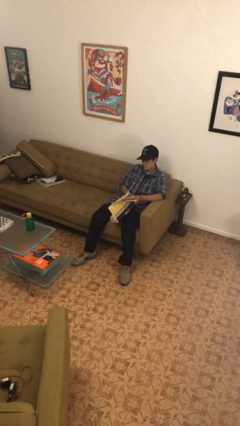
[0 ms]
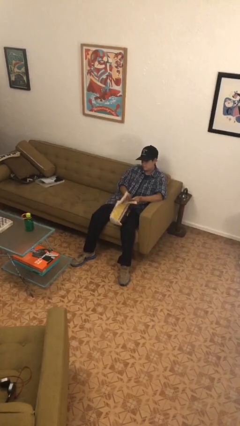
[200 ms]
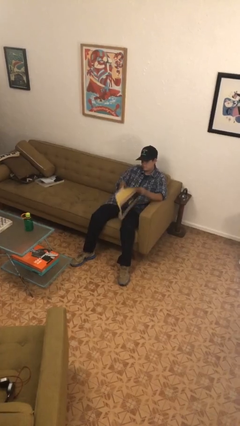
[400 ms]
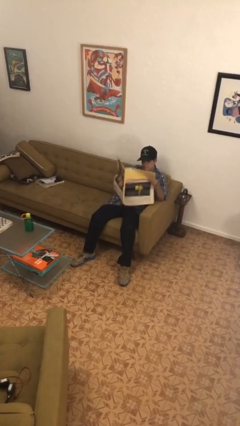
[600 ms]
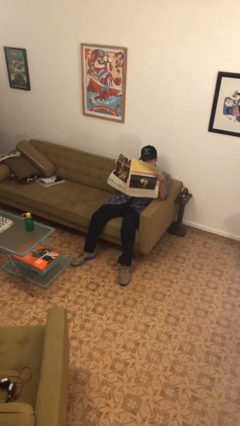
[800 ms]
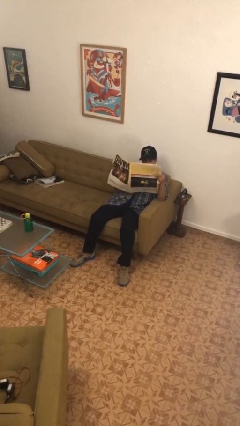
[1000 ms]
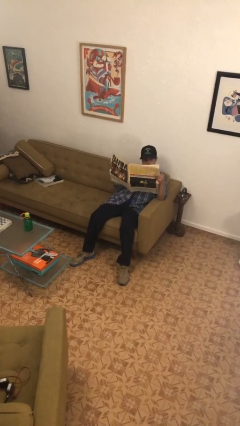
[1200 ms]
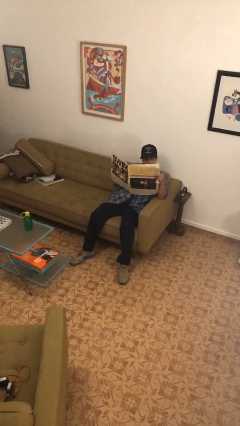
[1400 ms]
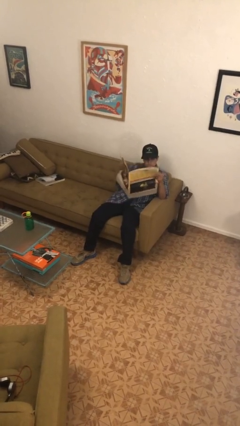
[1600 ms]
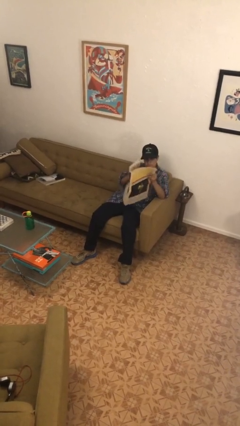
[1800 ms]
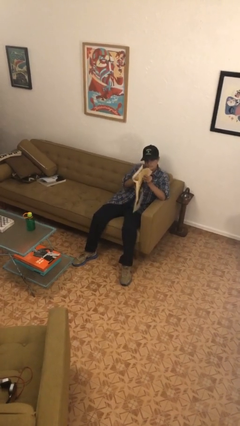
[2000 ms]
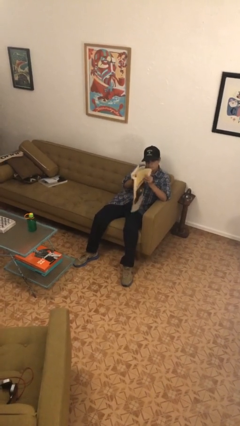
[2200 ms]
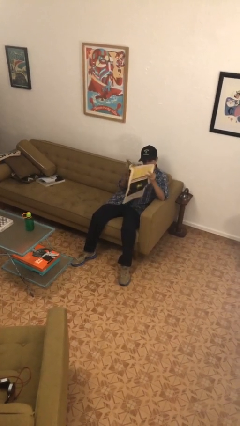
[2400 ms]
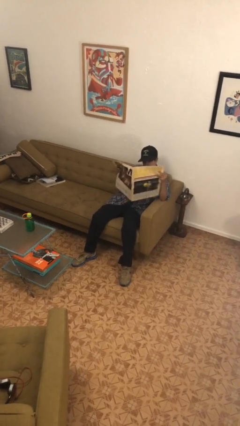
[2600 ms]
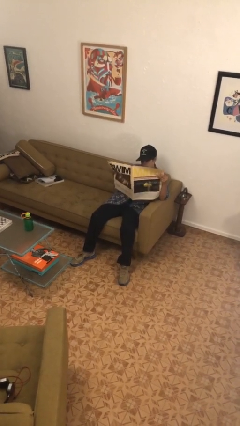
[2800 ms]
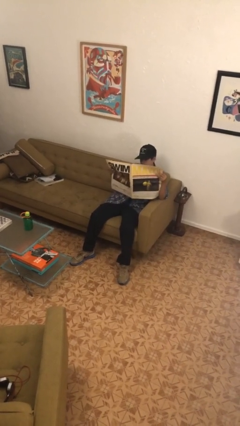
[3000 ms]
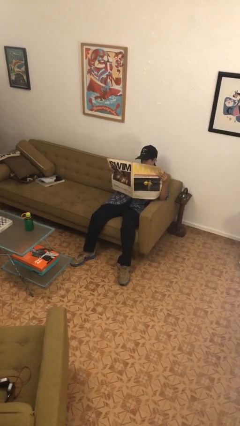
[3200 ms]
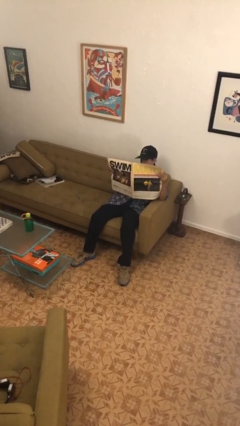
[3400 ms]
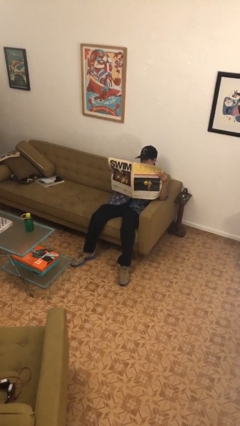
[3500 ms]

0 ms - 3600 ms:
person reads newspaper

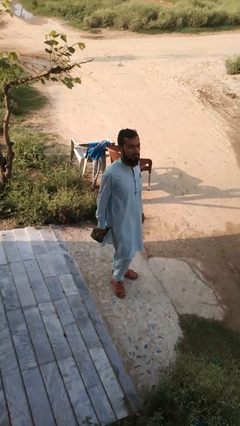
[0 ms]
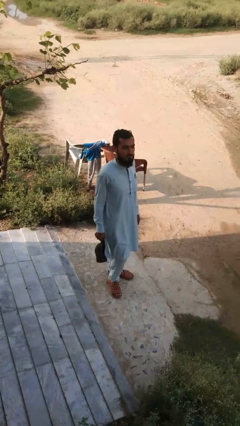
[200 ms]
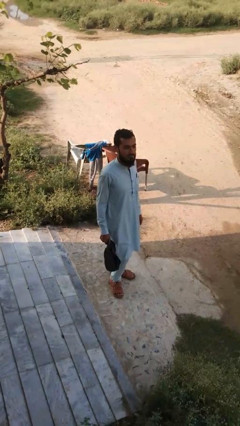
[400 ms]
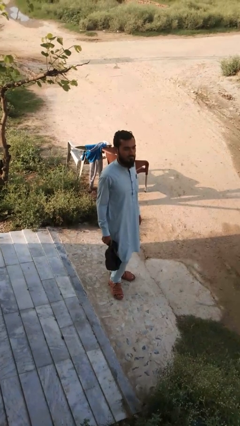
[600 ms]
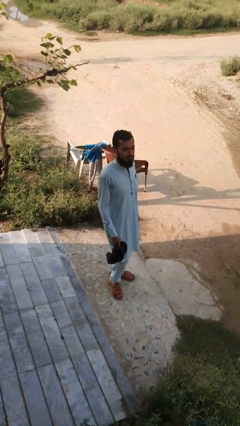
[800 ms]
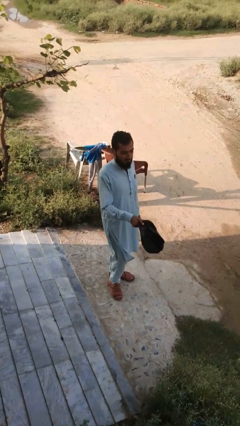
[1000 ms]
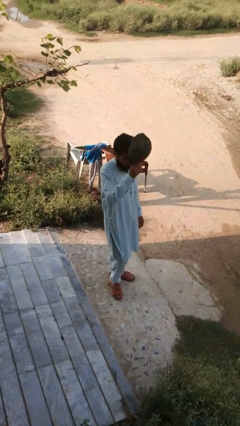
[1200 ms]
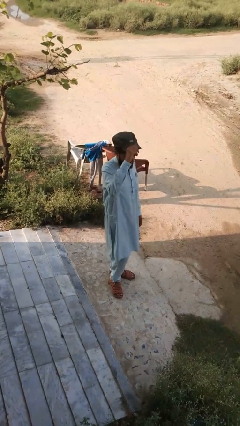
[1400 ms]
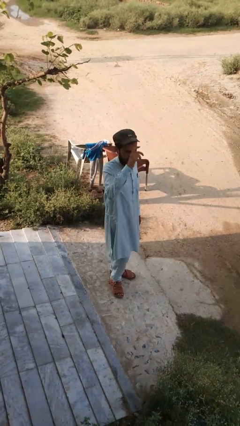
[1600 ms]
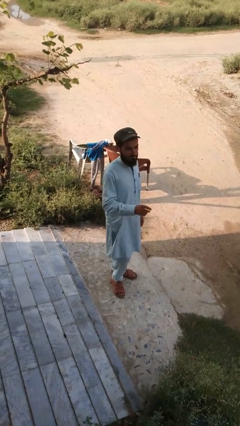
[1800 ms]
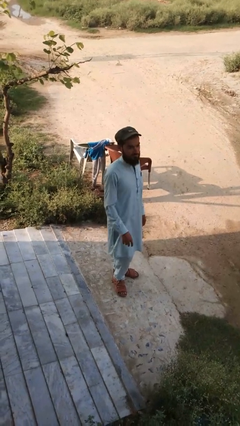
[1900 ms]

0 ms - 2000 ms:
person puts on hat

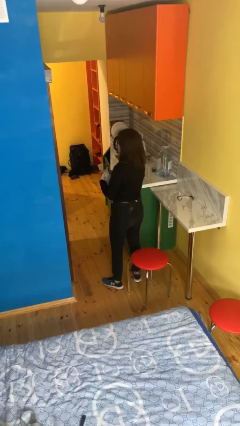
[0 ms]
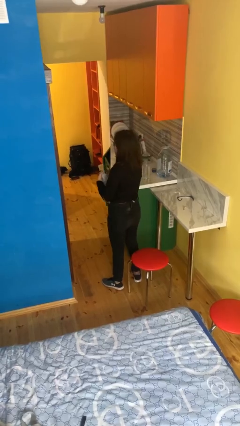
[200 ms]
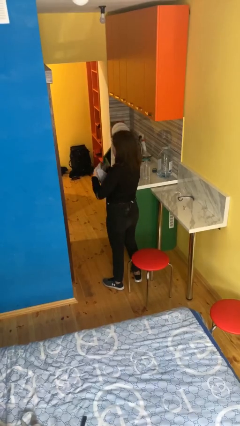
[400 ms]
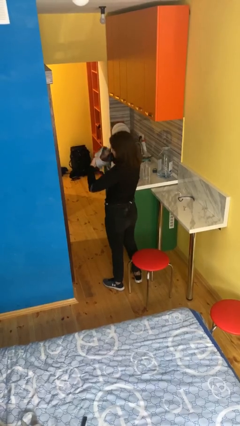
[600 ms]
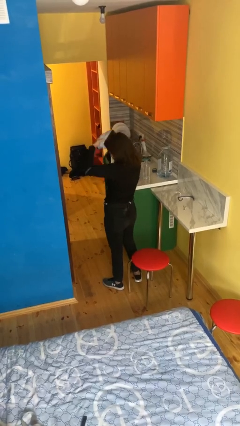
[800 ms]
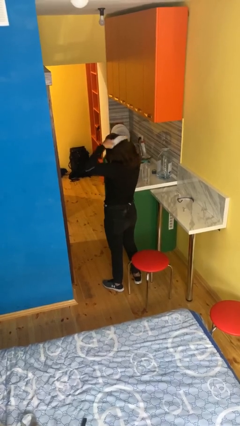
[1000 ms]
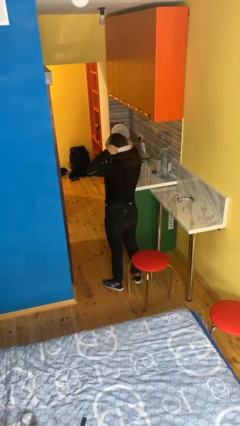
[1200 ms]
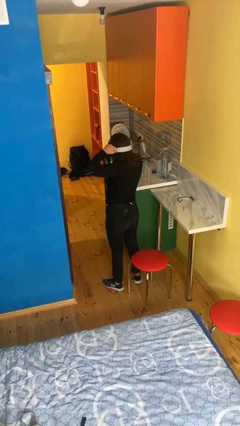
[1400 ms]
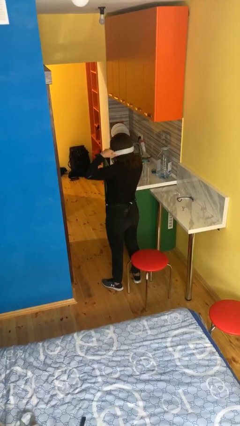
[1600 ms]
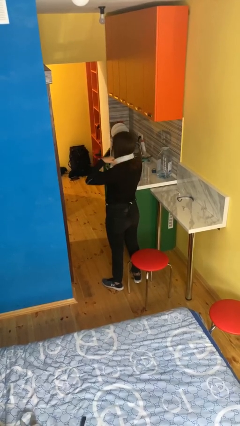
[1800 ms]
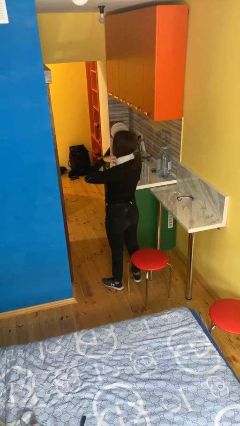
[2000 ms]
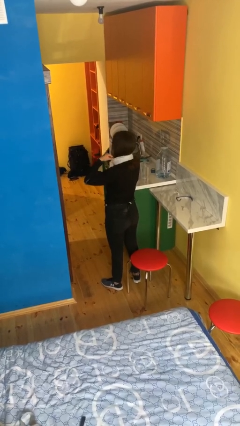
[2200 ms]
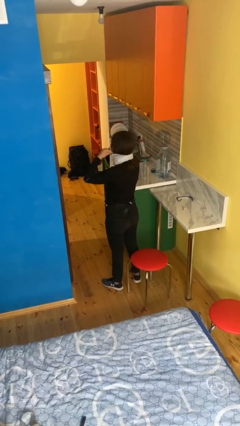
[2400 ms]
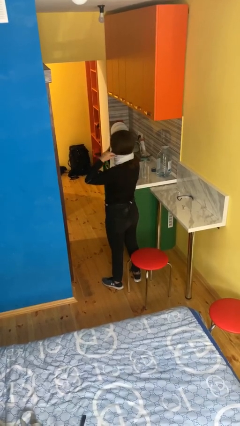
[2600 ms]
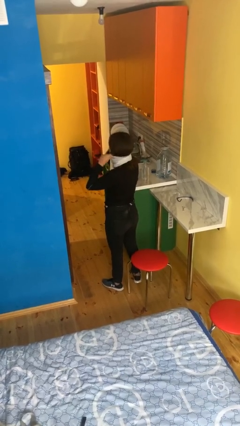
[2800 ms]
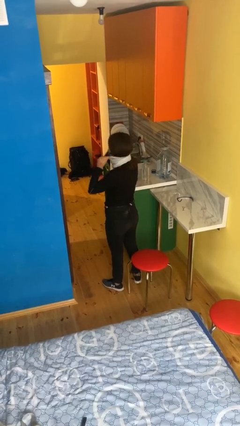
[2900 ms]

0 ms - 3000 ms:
person puts on scarf

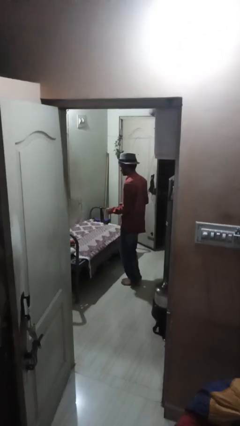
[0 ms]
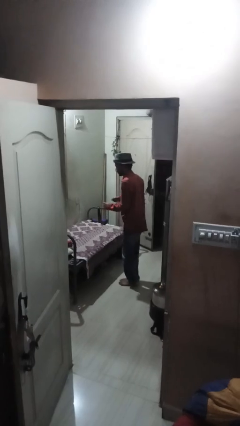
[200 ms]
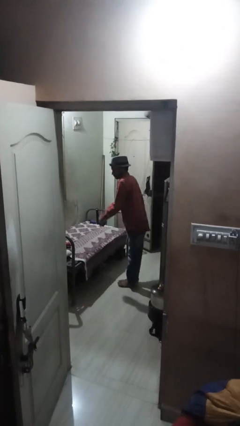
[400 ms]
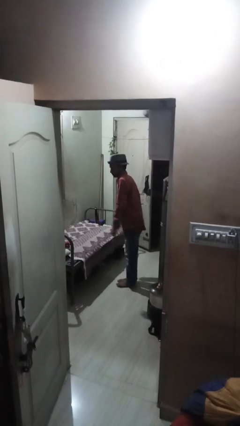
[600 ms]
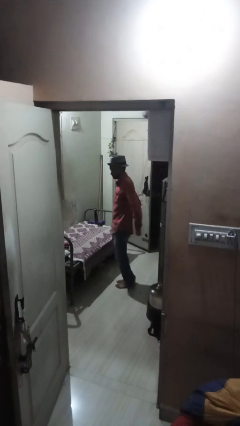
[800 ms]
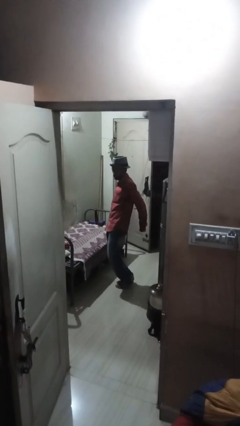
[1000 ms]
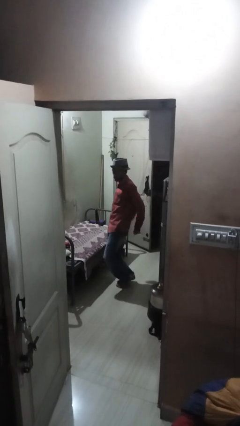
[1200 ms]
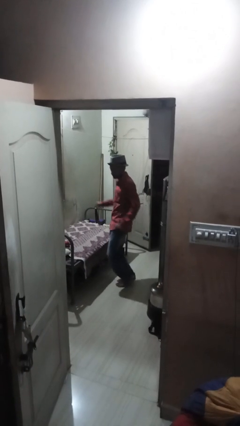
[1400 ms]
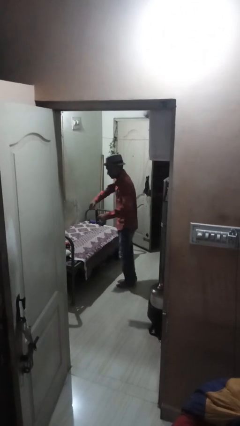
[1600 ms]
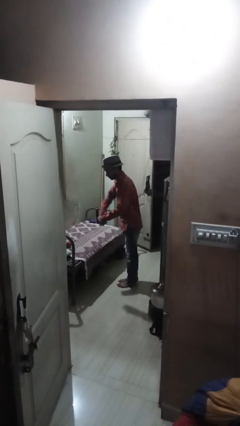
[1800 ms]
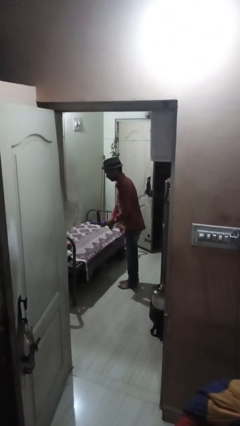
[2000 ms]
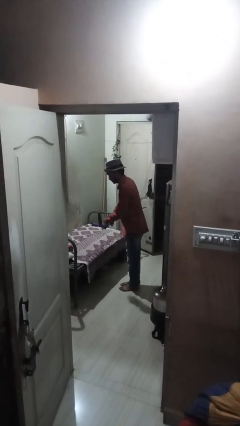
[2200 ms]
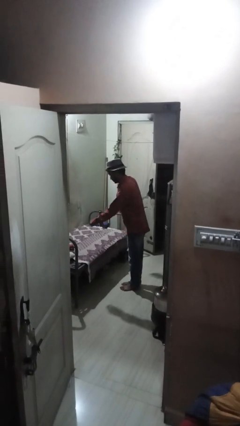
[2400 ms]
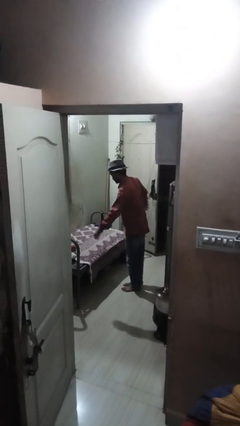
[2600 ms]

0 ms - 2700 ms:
person dances in place

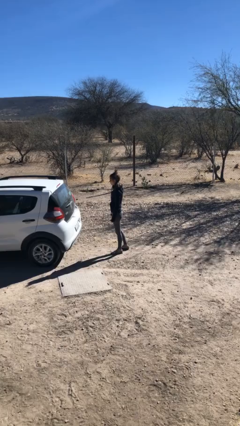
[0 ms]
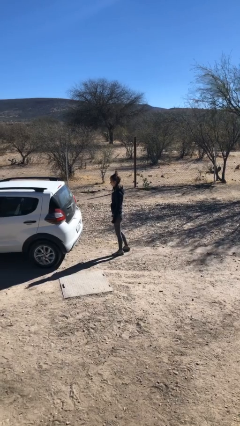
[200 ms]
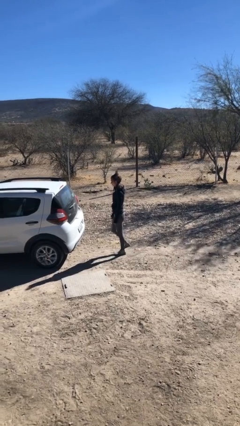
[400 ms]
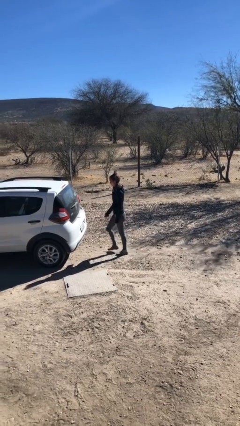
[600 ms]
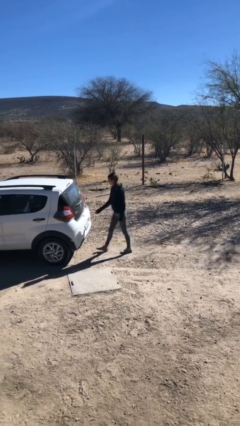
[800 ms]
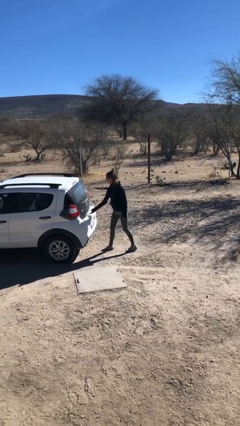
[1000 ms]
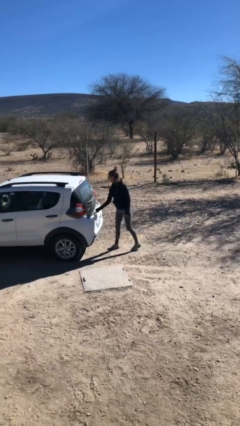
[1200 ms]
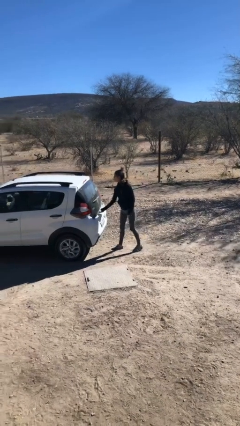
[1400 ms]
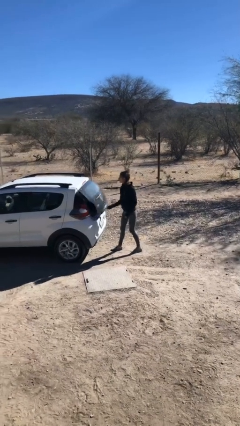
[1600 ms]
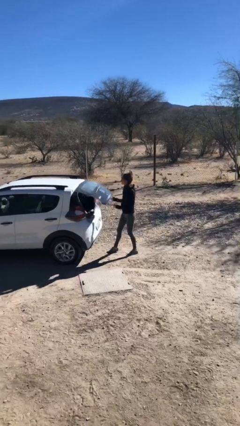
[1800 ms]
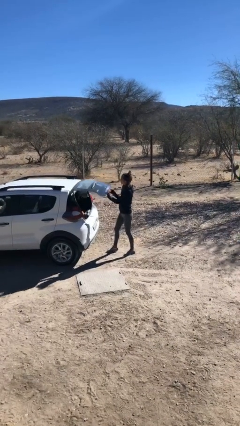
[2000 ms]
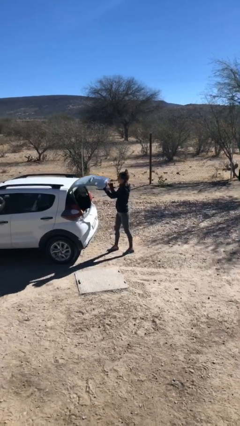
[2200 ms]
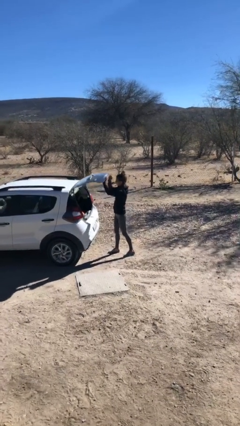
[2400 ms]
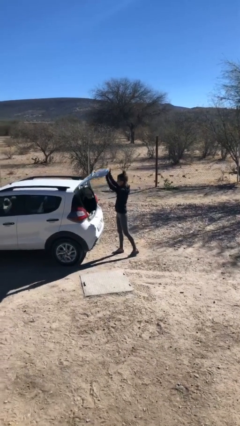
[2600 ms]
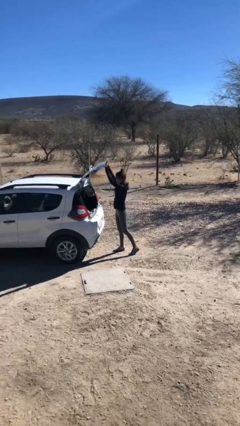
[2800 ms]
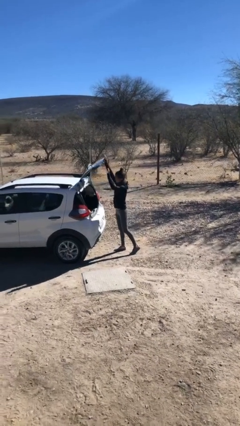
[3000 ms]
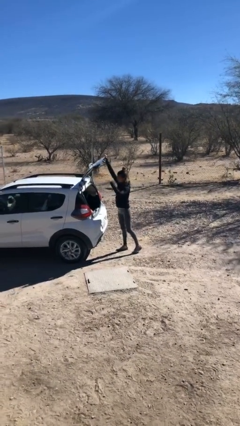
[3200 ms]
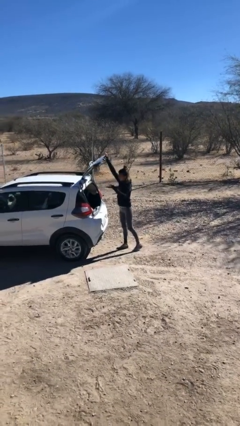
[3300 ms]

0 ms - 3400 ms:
person opens car trunk

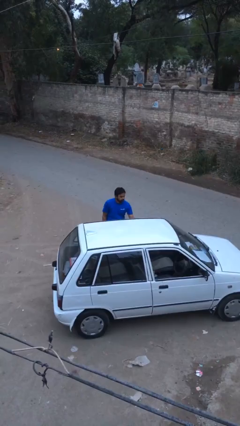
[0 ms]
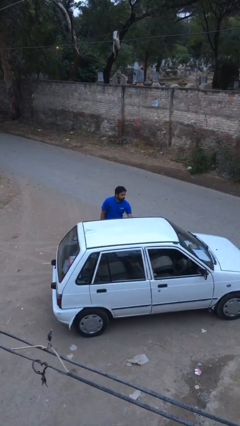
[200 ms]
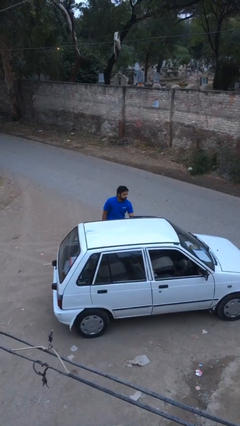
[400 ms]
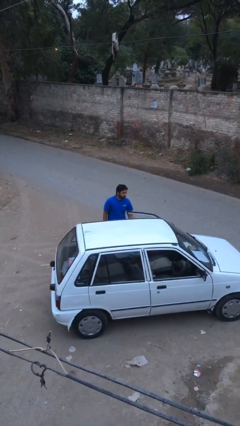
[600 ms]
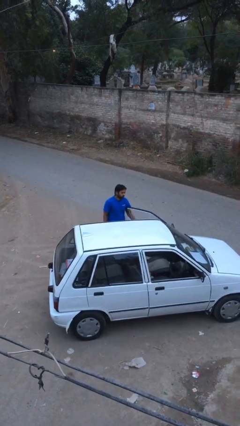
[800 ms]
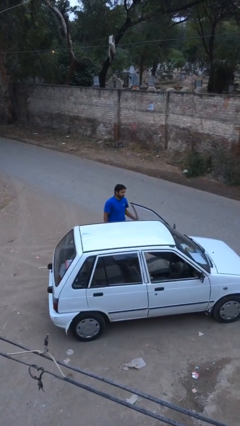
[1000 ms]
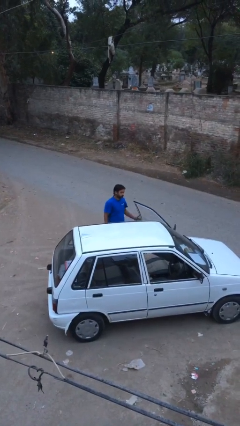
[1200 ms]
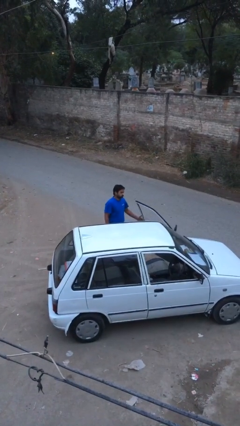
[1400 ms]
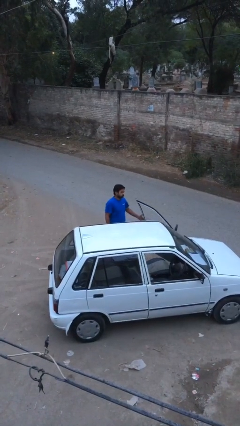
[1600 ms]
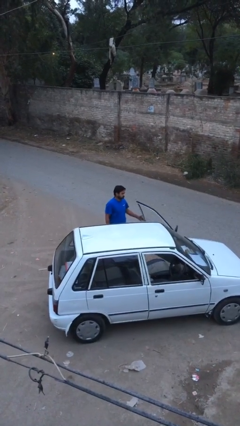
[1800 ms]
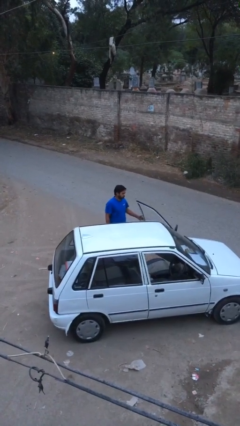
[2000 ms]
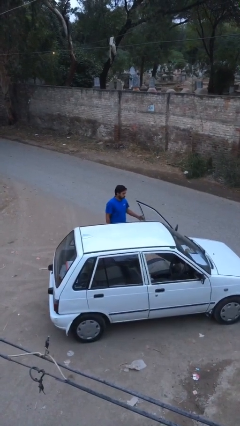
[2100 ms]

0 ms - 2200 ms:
person opens car door

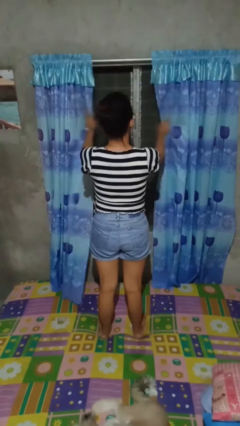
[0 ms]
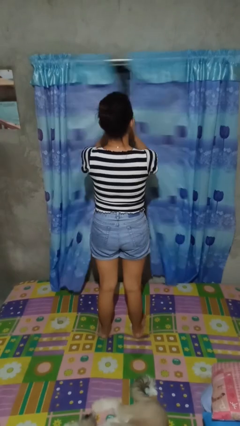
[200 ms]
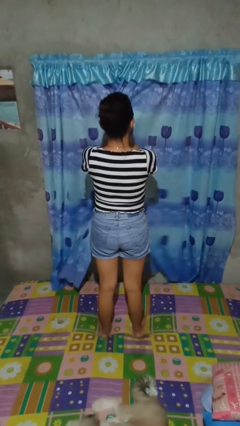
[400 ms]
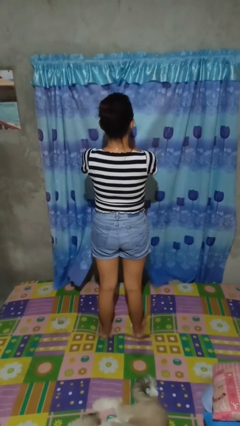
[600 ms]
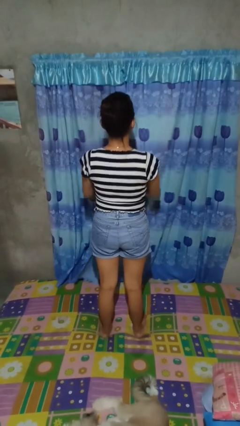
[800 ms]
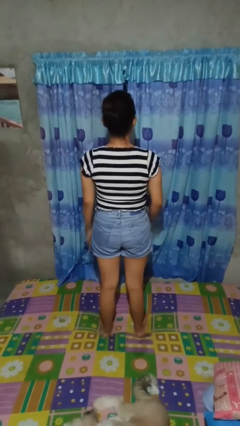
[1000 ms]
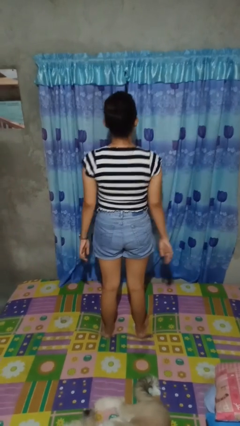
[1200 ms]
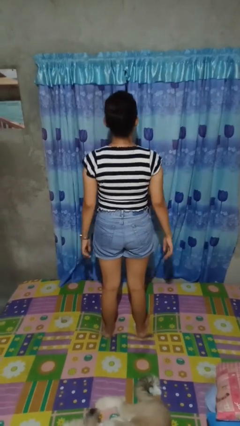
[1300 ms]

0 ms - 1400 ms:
person closes curtains
